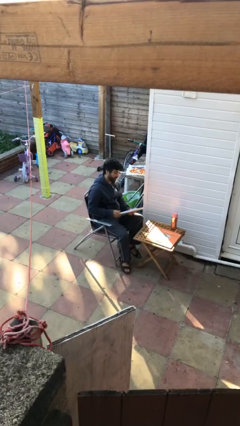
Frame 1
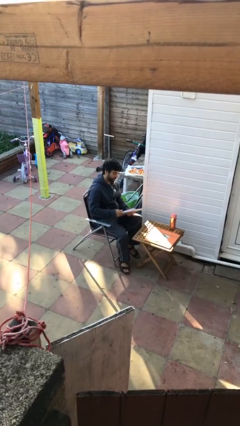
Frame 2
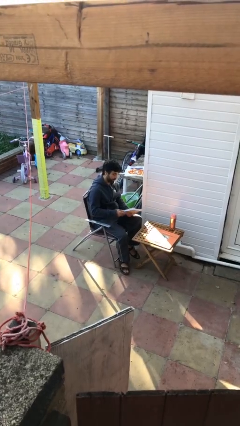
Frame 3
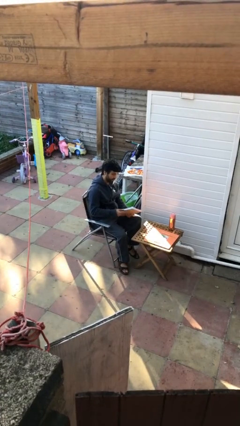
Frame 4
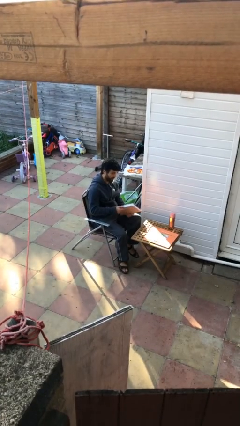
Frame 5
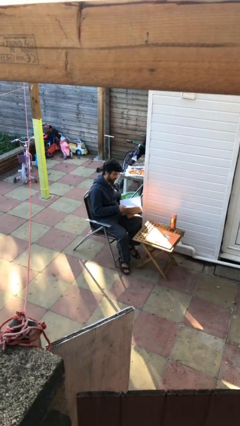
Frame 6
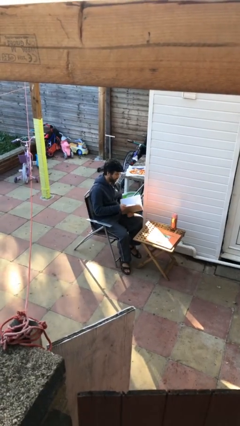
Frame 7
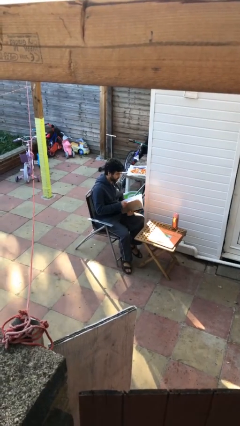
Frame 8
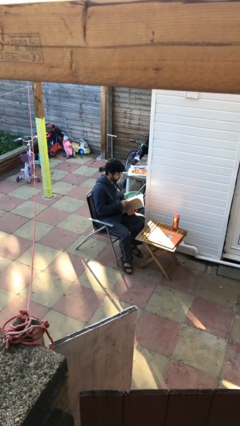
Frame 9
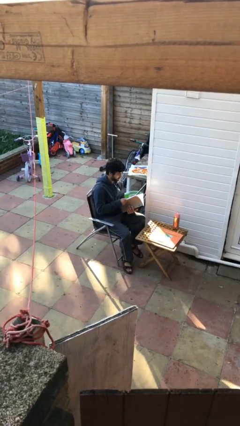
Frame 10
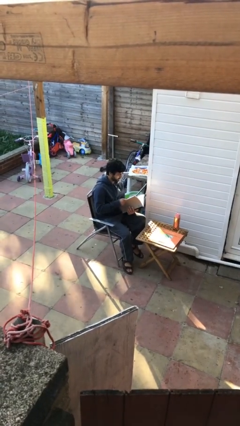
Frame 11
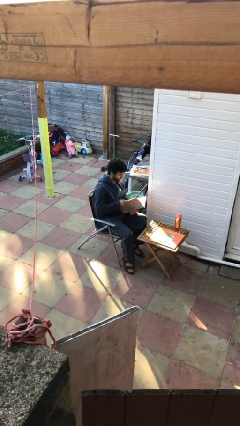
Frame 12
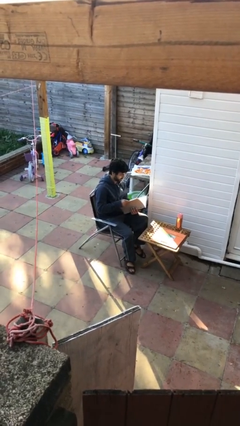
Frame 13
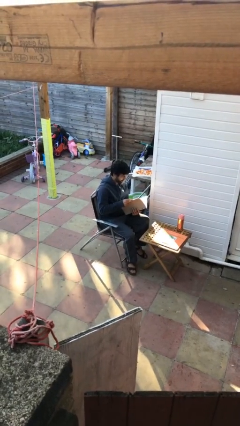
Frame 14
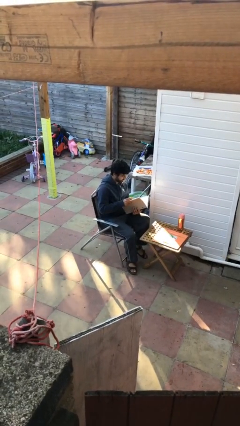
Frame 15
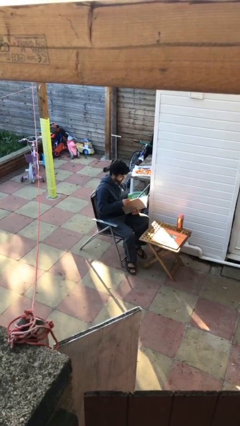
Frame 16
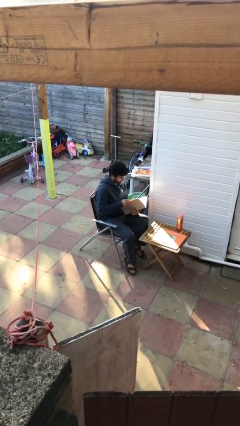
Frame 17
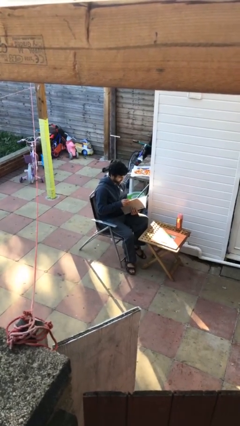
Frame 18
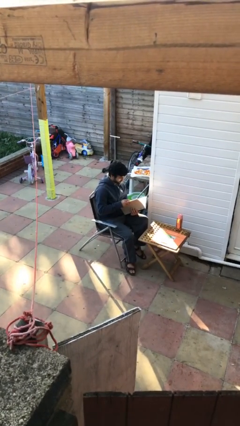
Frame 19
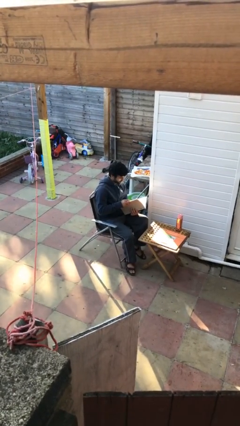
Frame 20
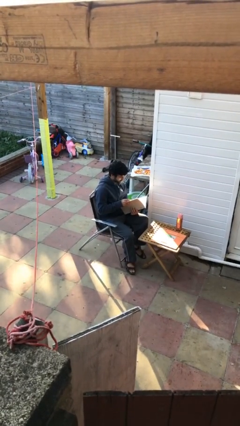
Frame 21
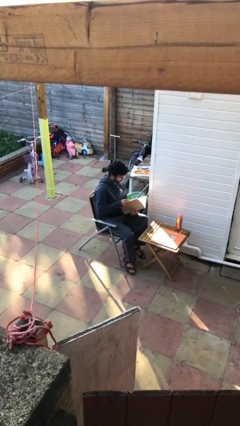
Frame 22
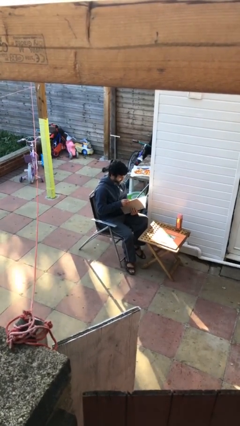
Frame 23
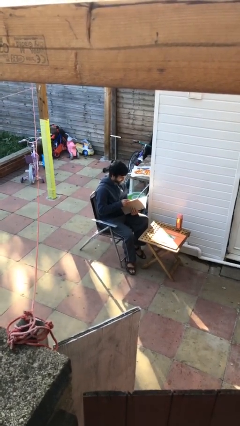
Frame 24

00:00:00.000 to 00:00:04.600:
person reads document

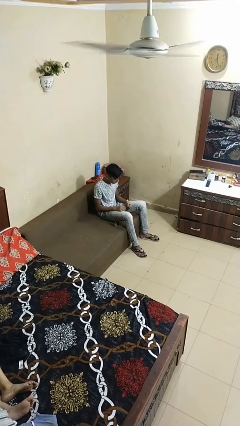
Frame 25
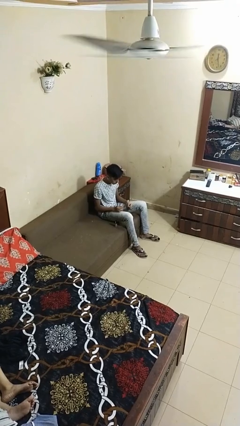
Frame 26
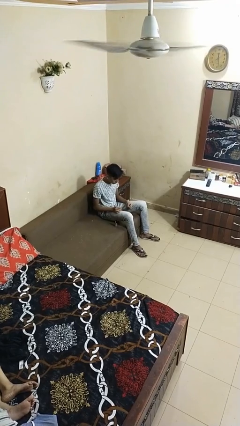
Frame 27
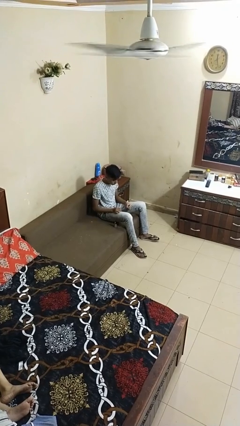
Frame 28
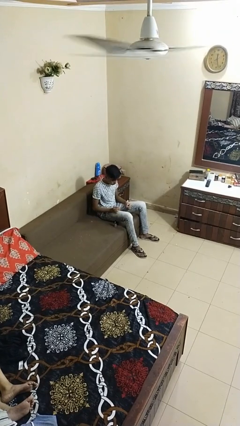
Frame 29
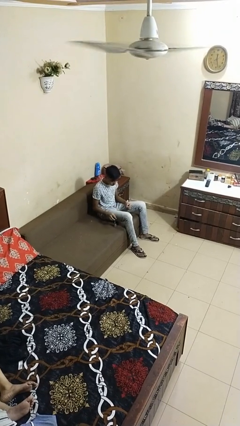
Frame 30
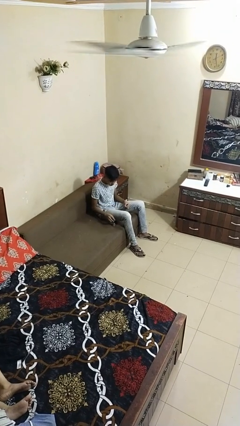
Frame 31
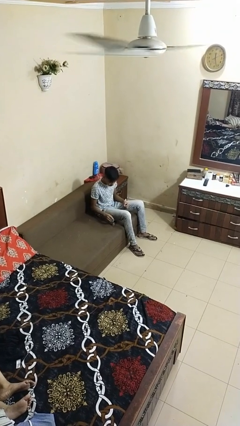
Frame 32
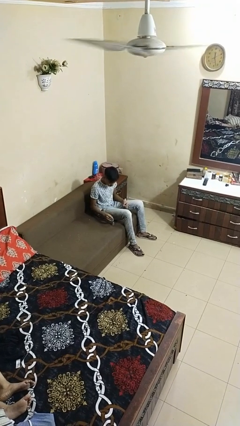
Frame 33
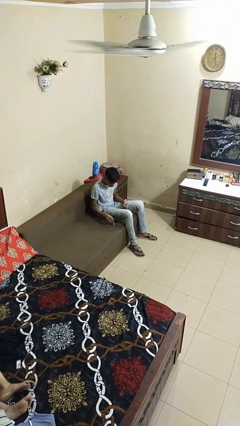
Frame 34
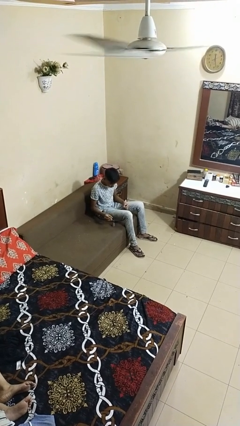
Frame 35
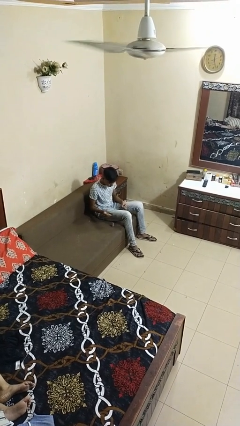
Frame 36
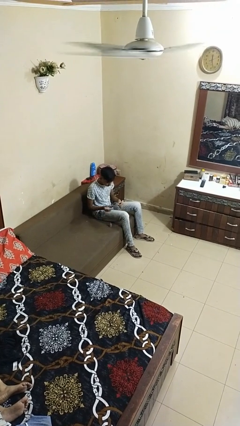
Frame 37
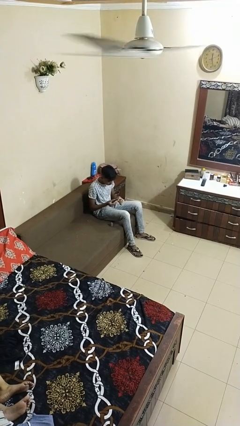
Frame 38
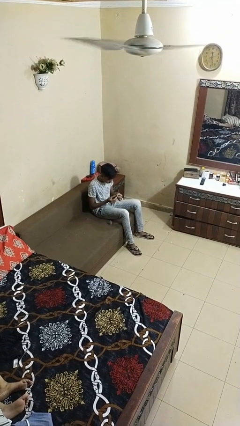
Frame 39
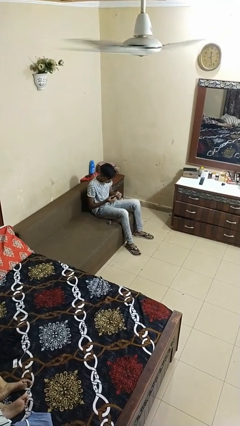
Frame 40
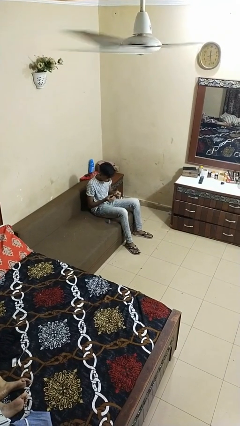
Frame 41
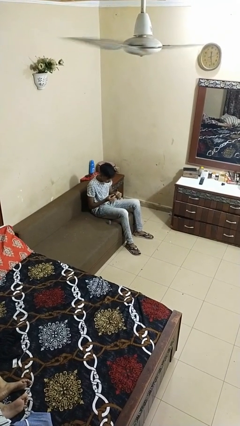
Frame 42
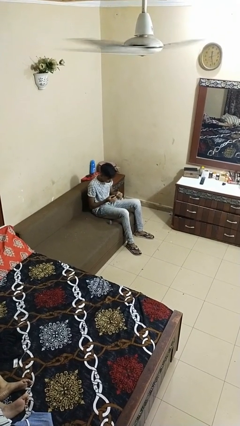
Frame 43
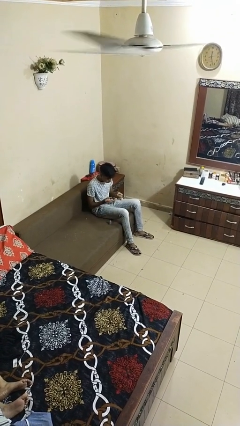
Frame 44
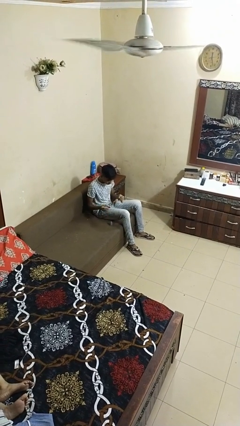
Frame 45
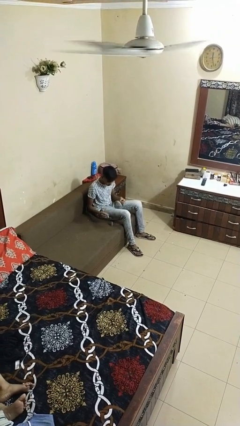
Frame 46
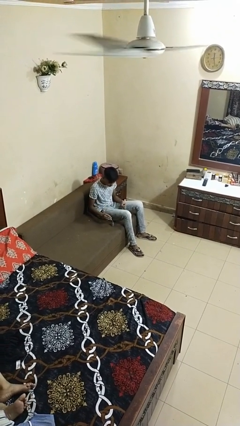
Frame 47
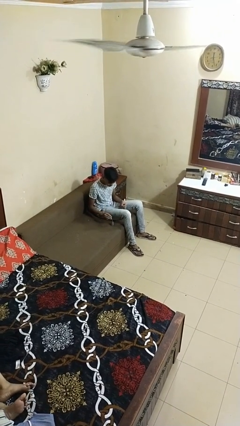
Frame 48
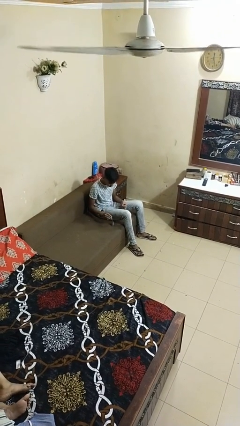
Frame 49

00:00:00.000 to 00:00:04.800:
person paints fingernails

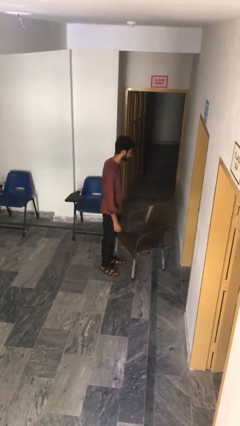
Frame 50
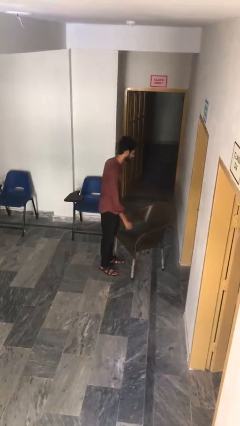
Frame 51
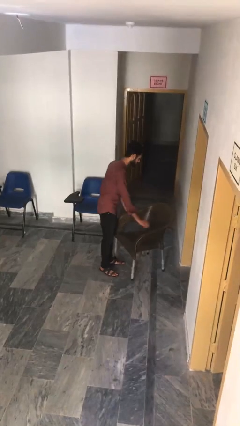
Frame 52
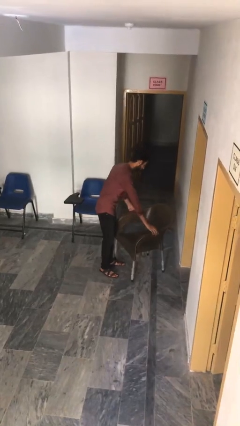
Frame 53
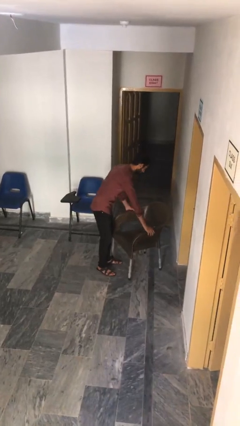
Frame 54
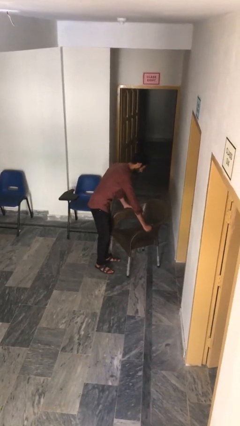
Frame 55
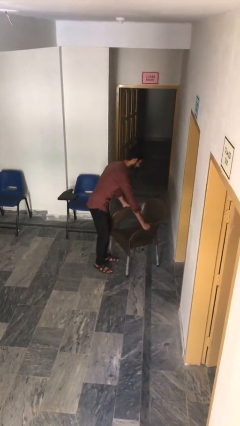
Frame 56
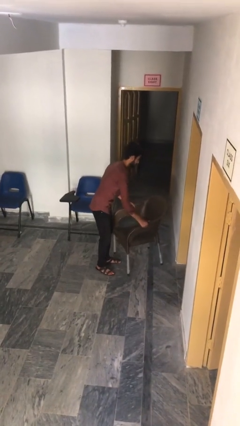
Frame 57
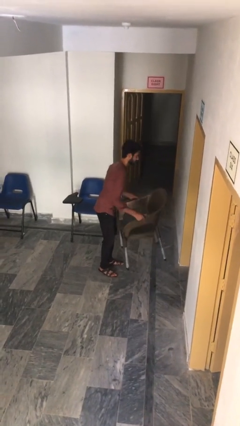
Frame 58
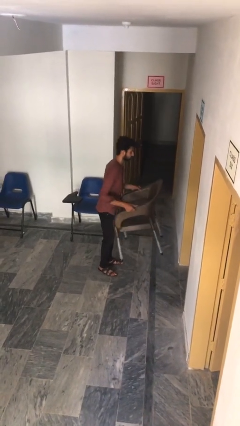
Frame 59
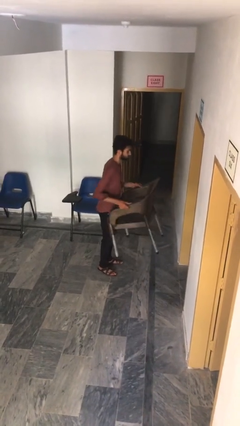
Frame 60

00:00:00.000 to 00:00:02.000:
person picks up object from floor

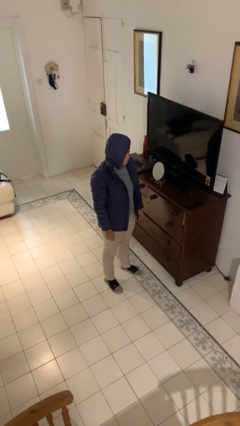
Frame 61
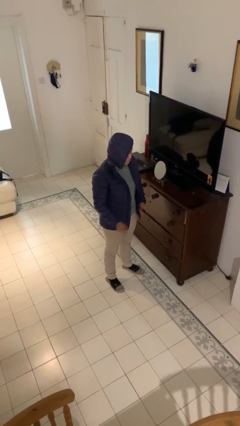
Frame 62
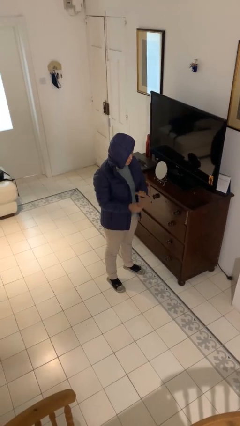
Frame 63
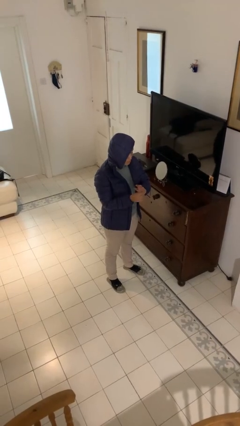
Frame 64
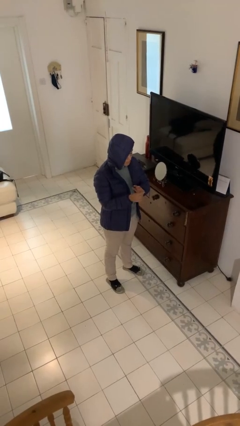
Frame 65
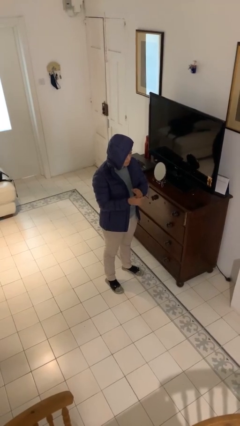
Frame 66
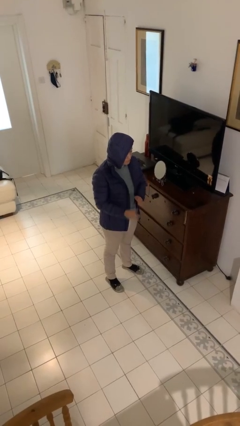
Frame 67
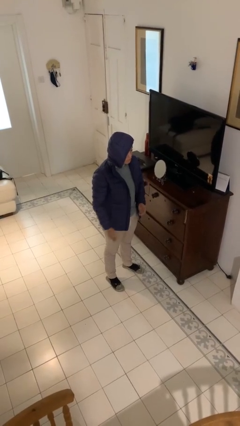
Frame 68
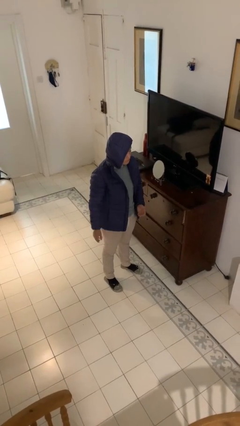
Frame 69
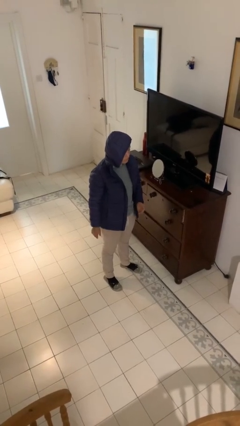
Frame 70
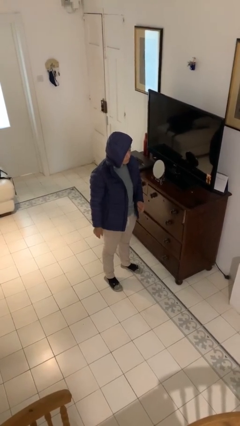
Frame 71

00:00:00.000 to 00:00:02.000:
person puts on ring

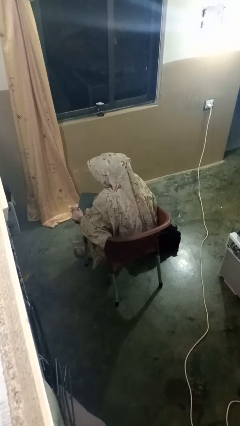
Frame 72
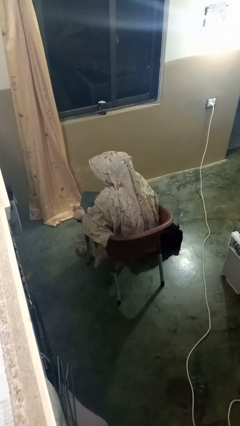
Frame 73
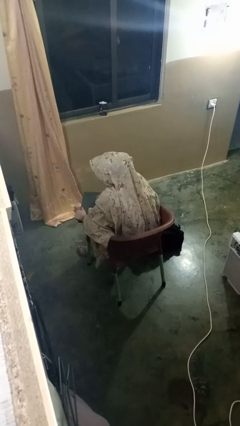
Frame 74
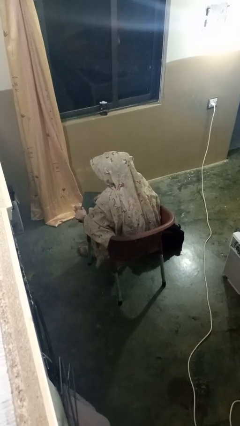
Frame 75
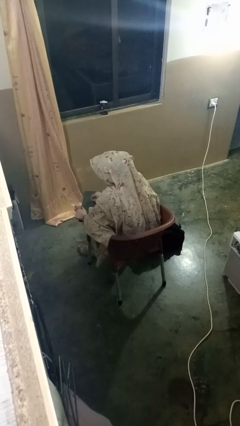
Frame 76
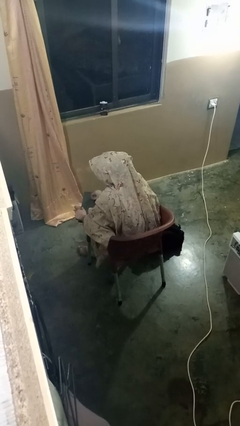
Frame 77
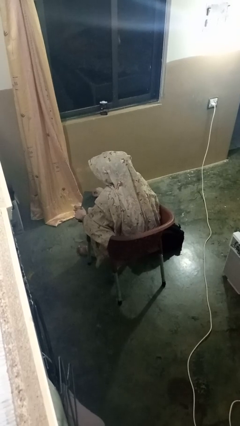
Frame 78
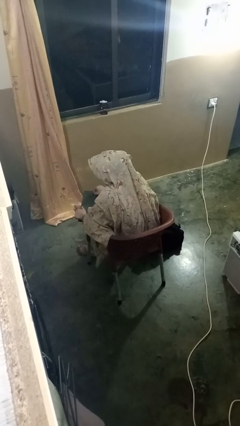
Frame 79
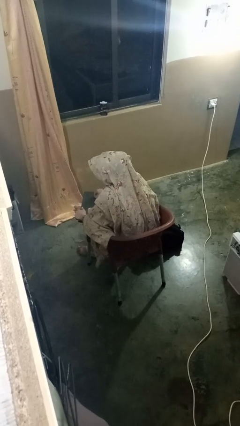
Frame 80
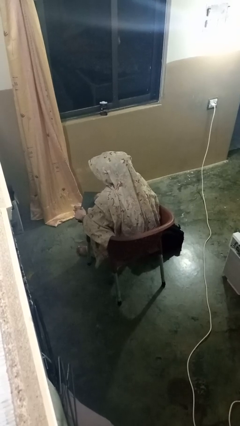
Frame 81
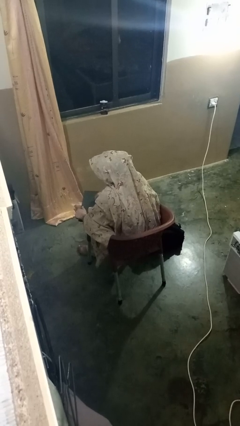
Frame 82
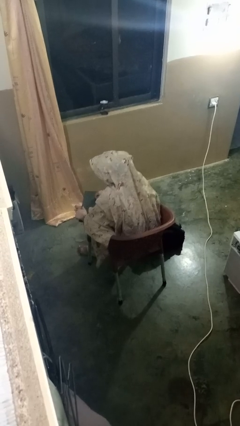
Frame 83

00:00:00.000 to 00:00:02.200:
person interacts with tablet

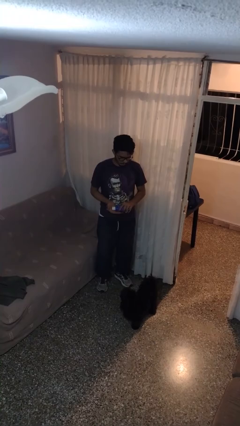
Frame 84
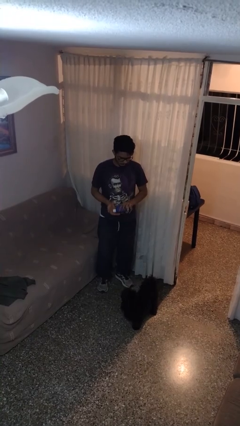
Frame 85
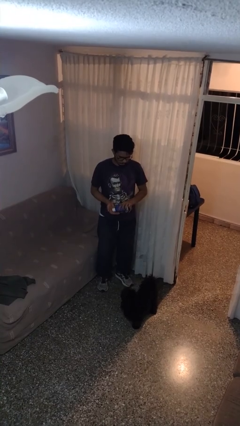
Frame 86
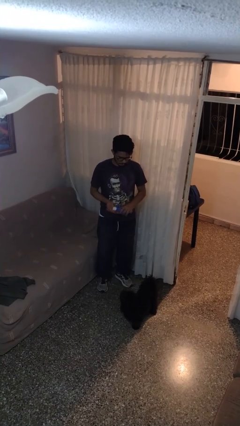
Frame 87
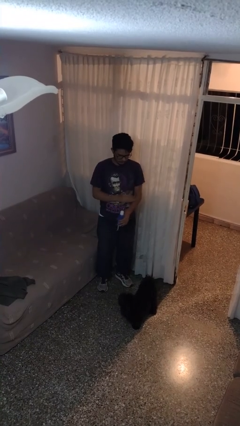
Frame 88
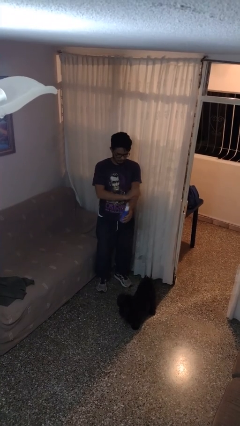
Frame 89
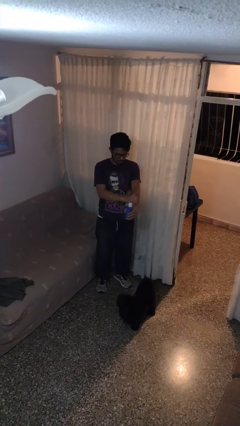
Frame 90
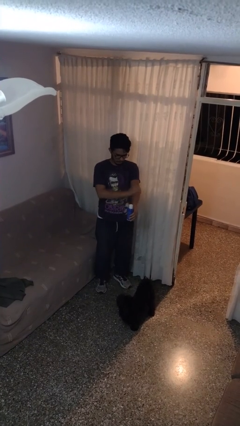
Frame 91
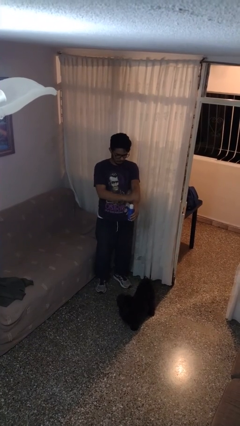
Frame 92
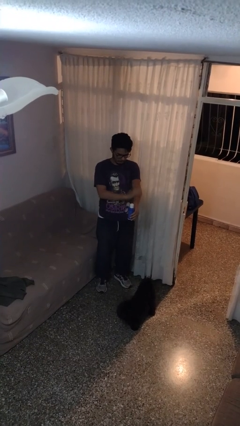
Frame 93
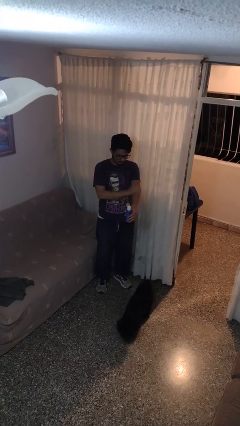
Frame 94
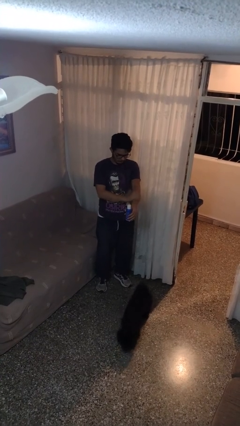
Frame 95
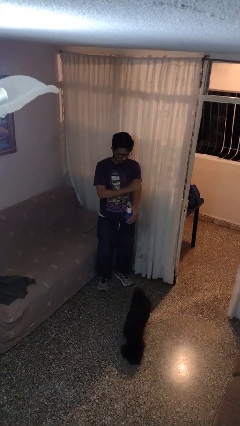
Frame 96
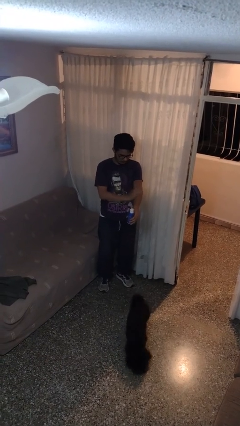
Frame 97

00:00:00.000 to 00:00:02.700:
person applies sunscreen
